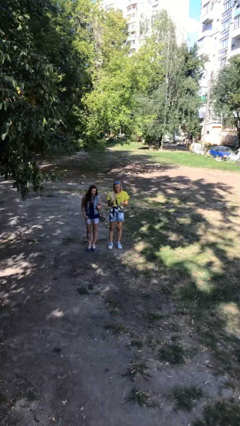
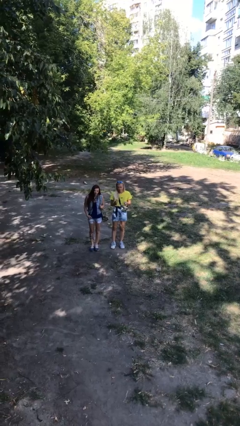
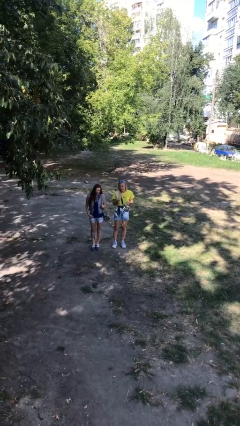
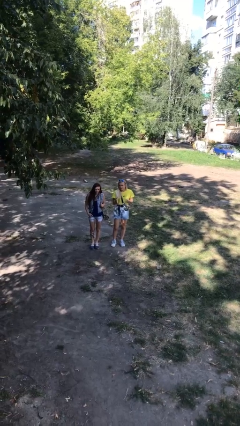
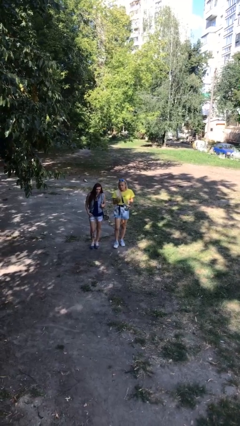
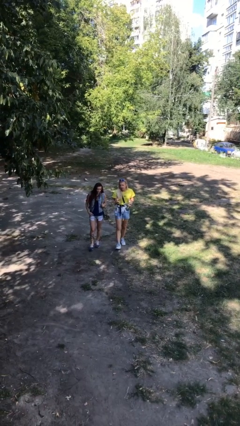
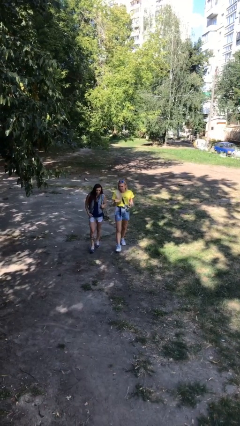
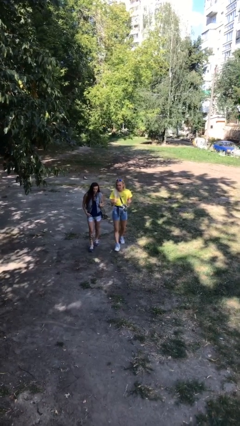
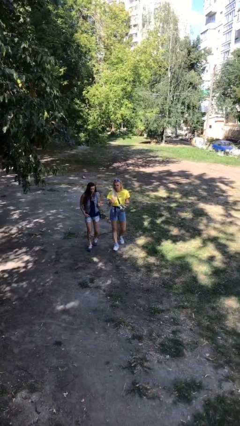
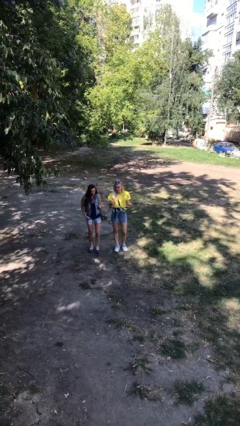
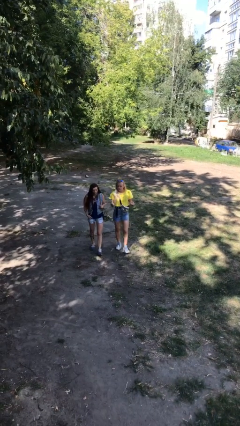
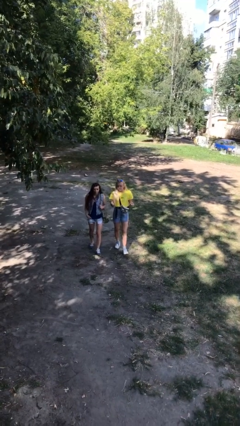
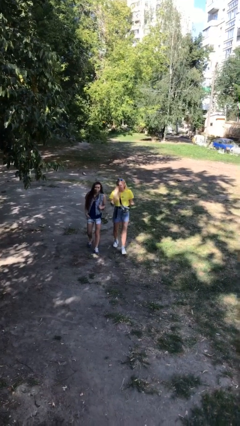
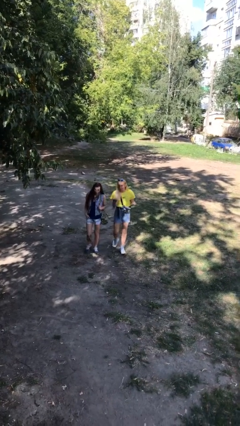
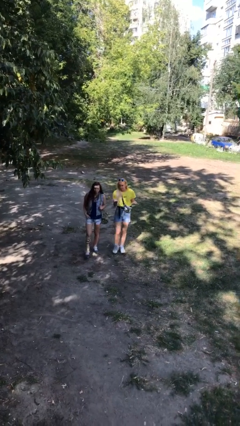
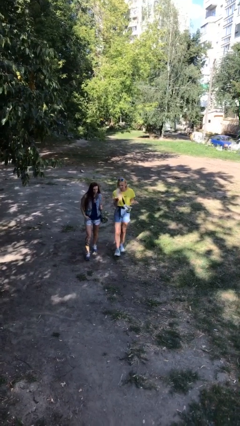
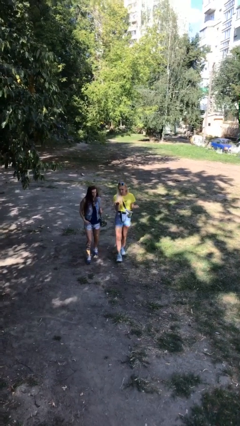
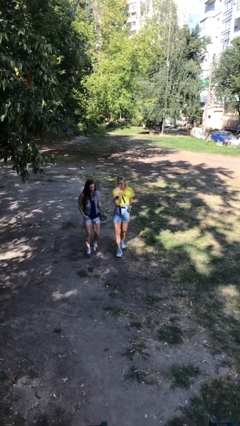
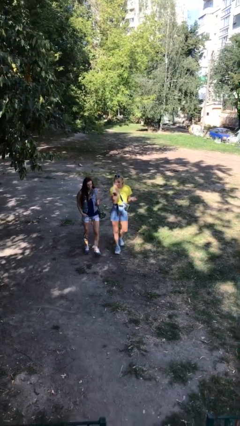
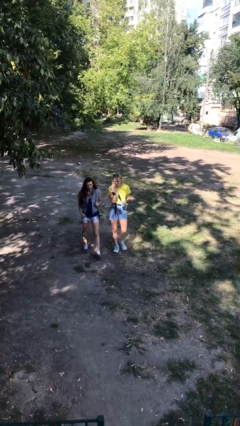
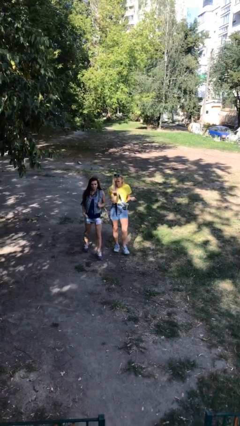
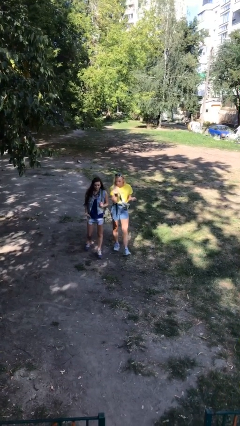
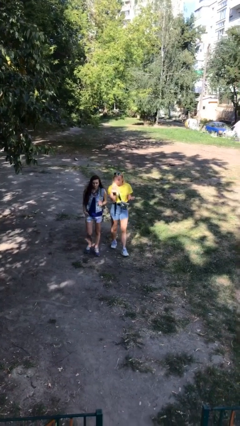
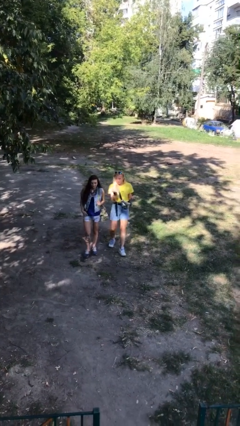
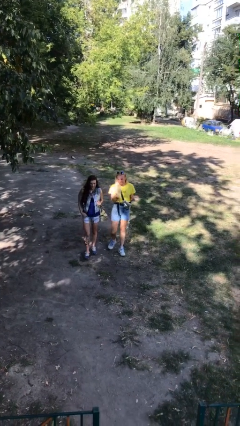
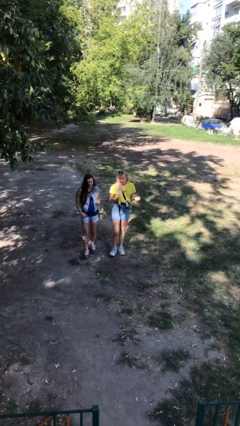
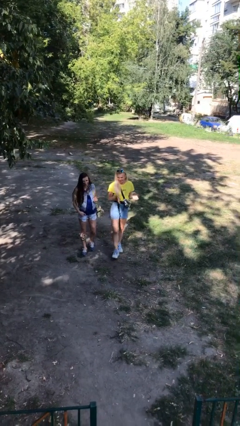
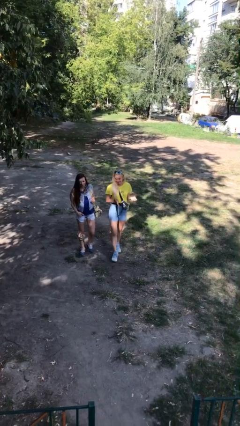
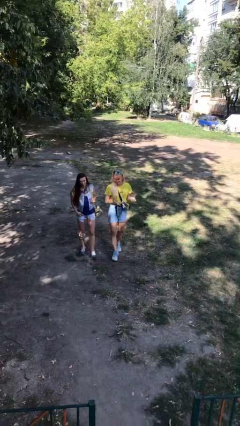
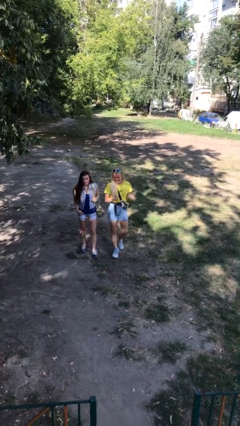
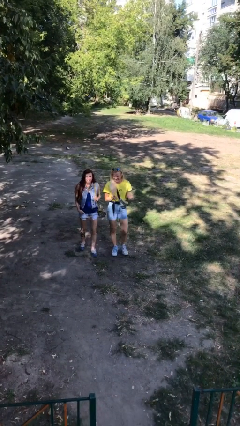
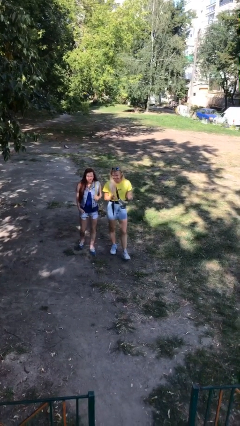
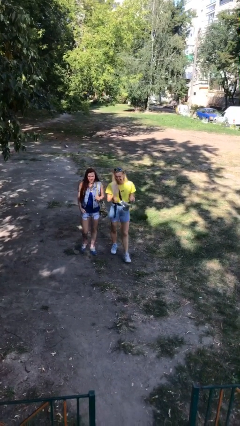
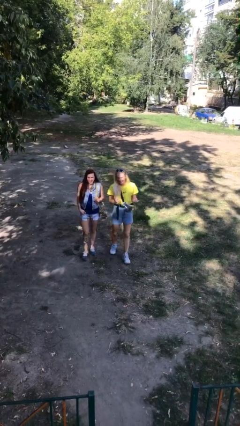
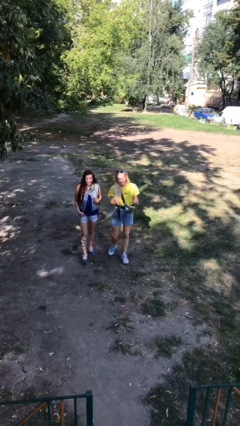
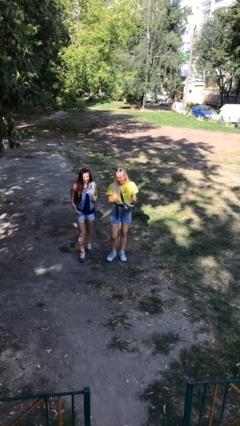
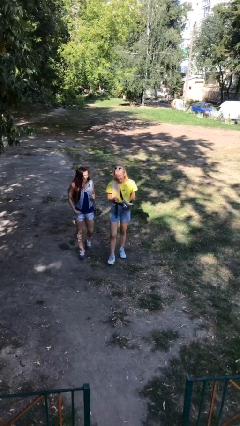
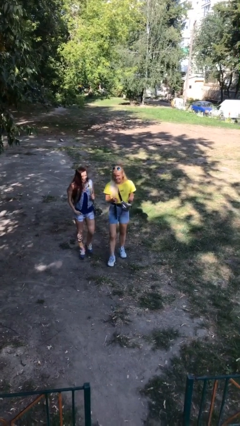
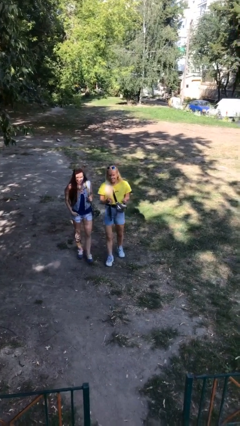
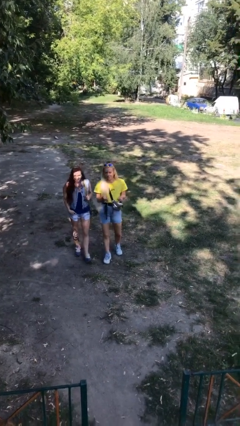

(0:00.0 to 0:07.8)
person talks to person

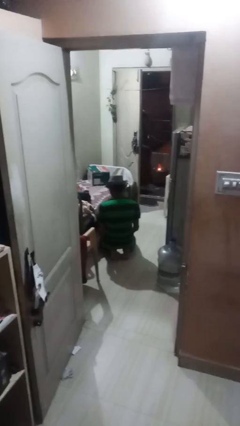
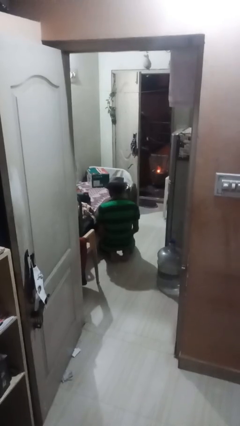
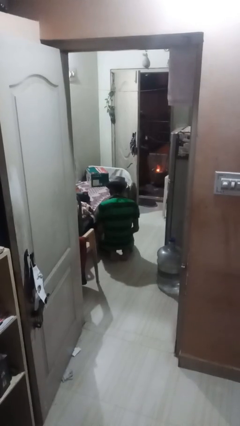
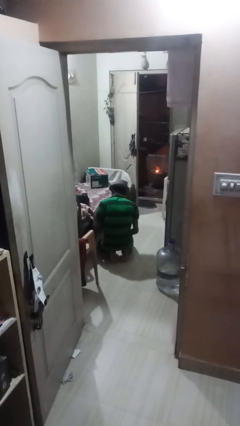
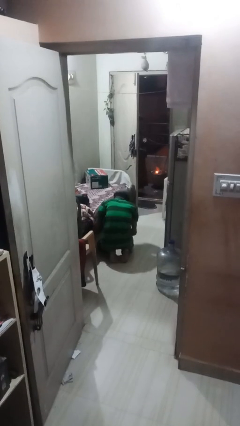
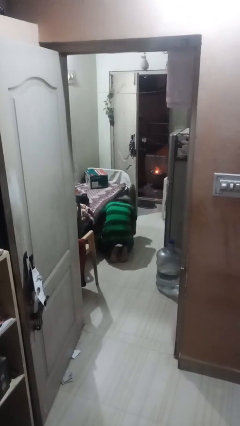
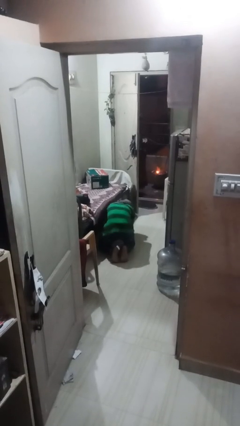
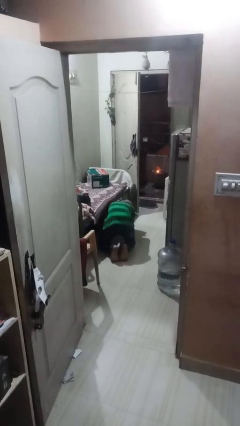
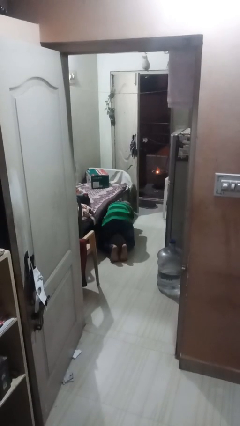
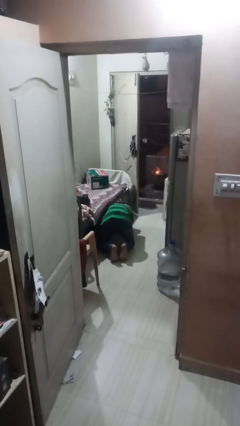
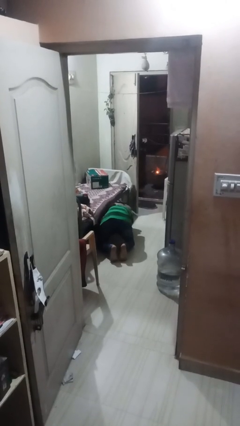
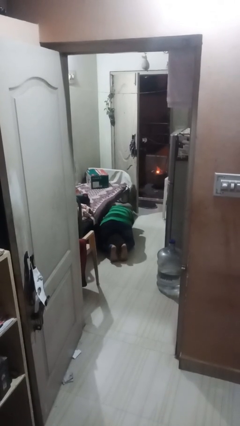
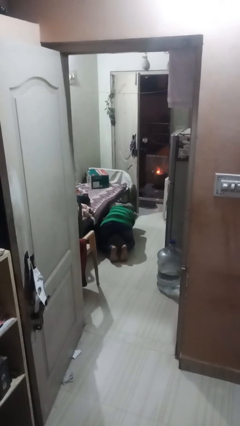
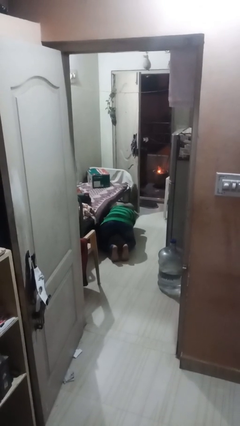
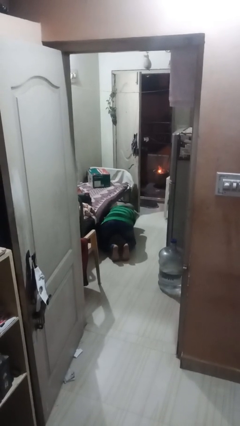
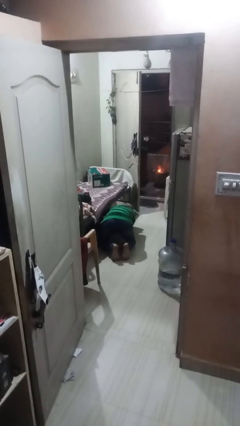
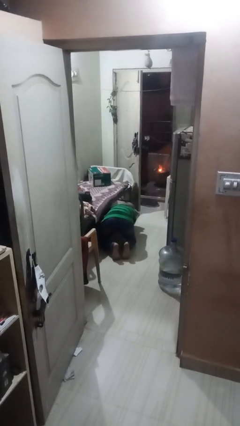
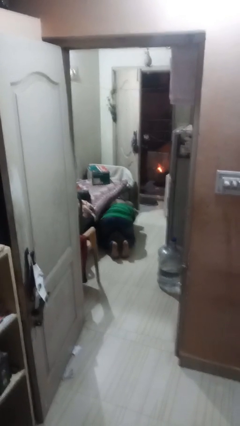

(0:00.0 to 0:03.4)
person searches under bed

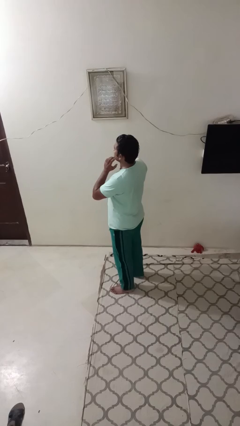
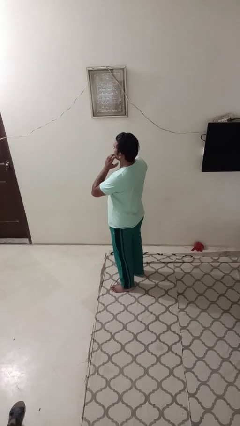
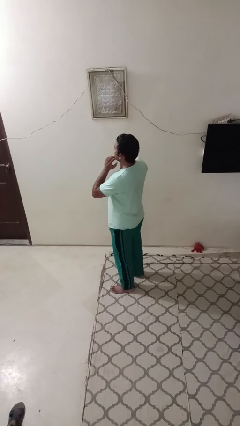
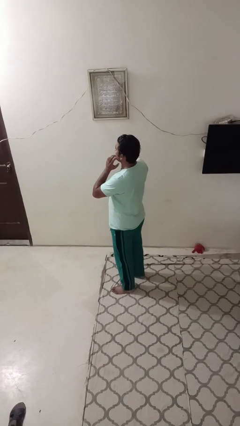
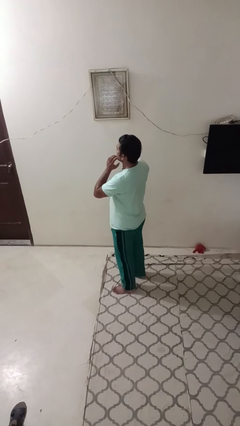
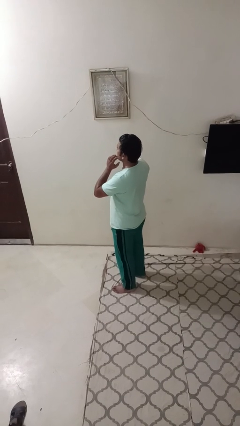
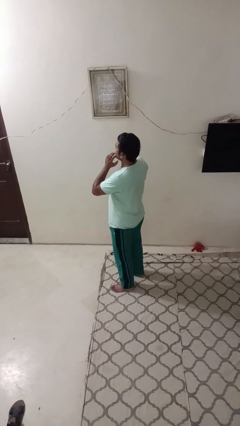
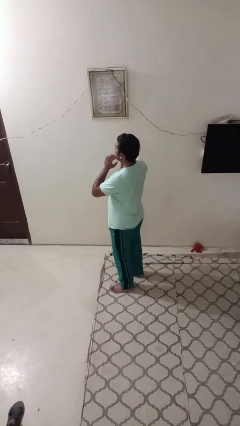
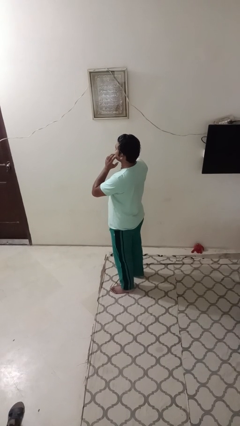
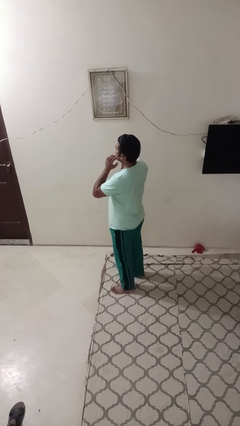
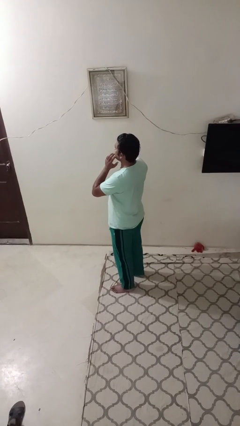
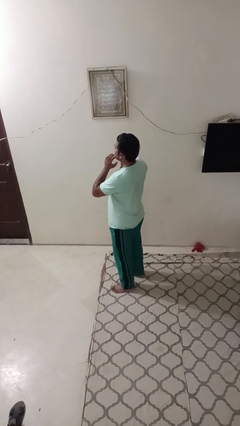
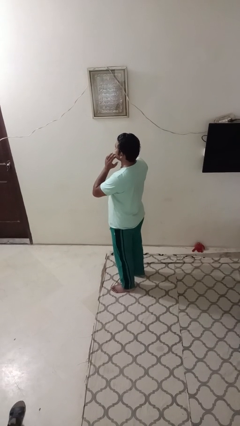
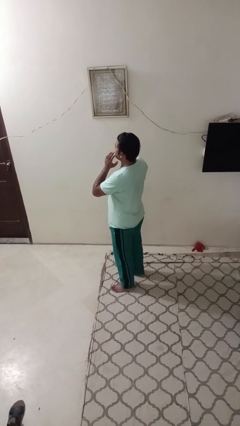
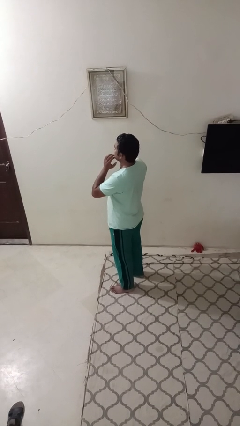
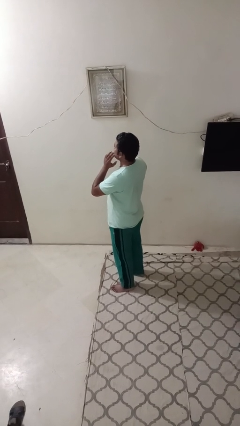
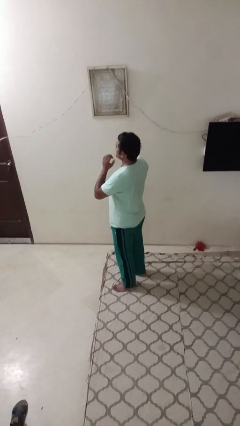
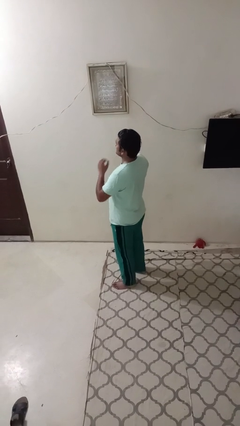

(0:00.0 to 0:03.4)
person scratches face

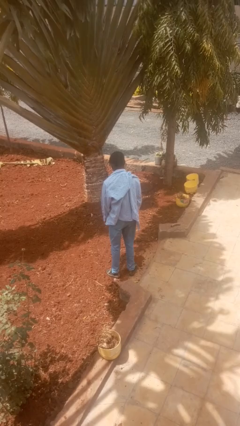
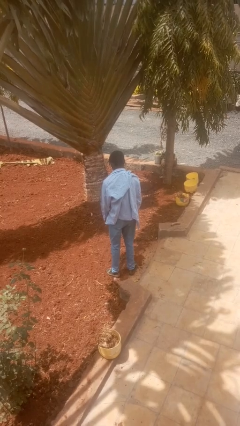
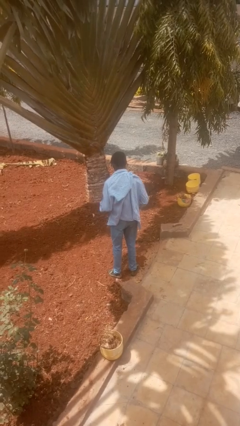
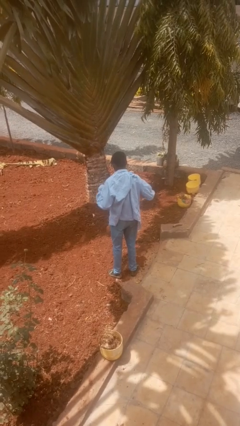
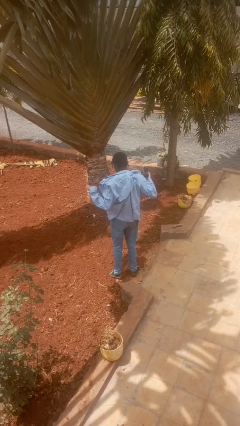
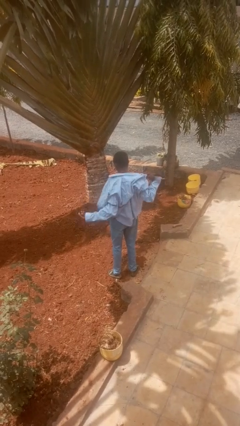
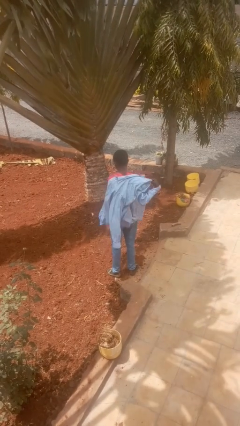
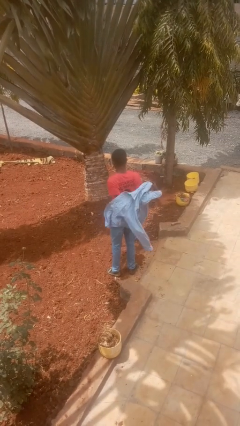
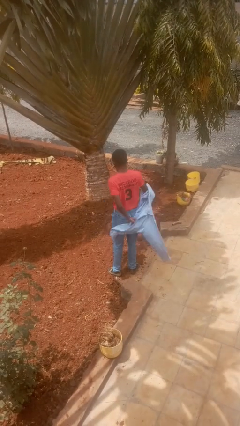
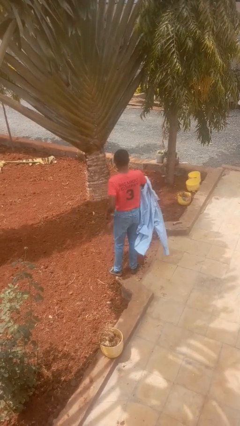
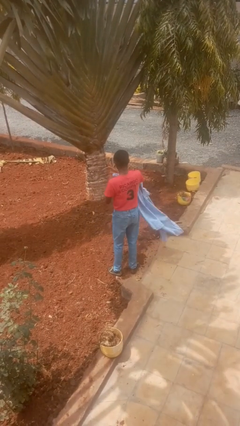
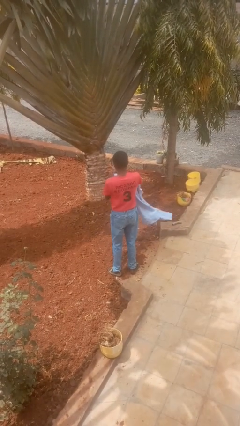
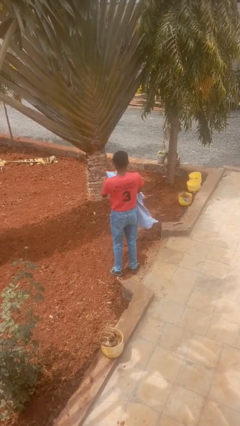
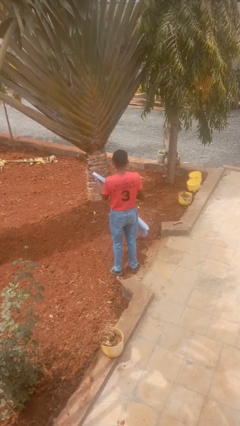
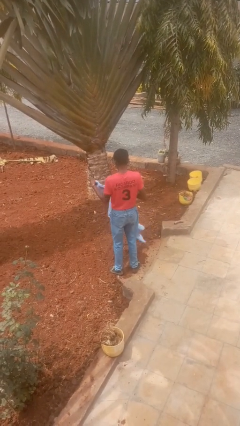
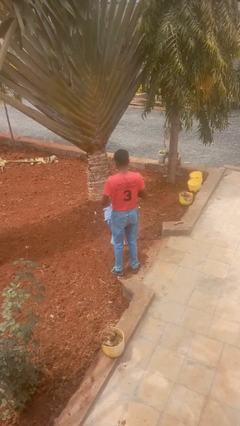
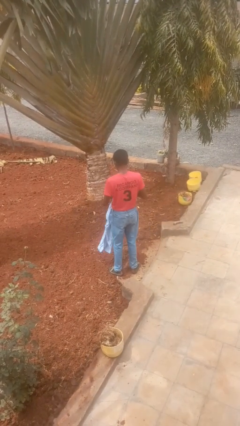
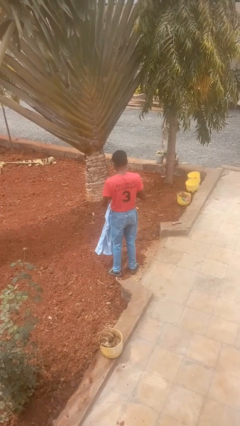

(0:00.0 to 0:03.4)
person takes off shirt
